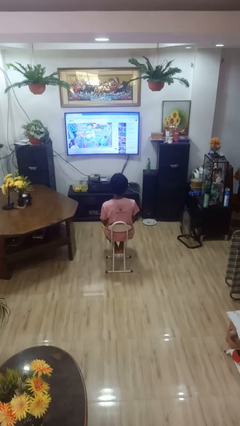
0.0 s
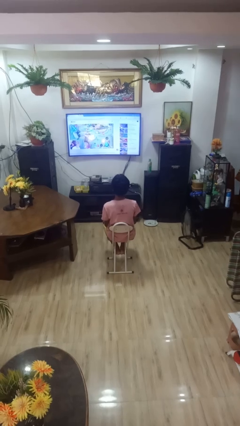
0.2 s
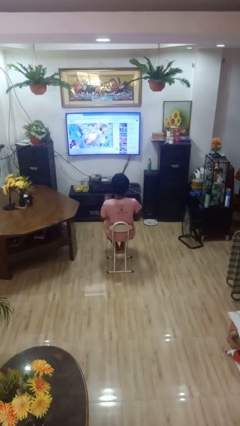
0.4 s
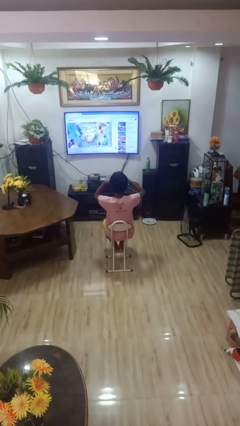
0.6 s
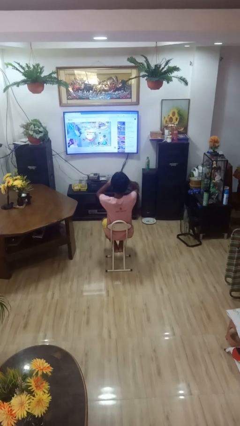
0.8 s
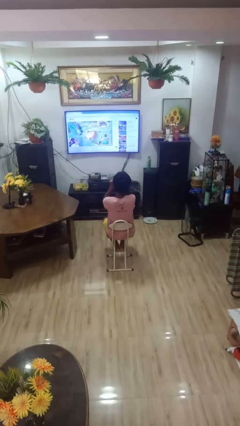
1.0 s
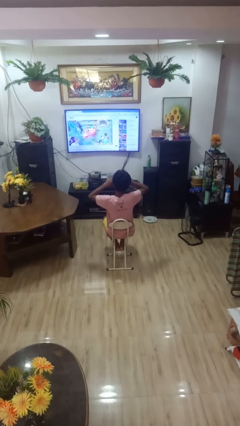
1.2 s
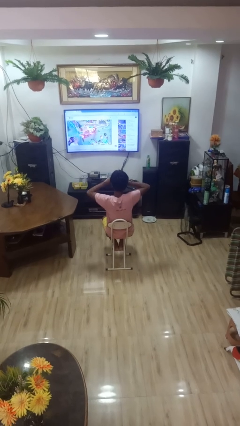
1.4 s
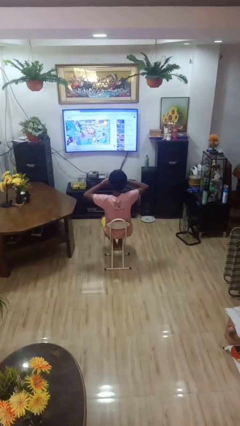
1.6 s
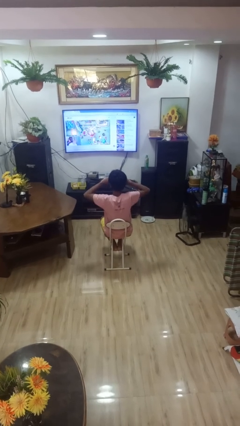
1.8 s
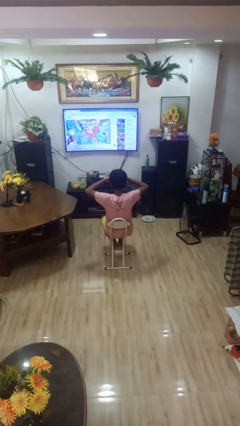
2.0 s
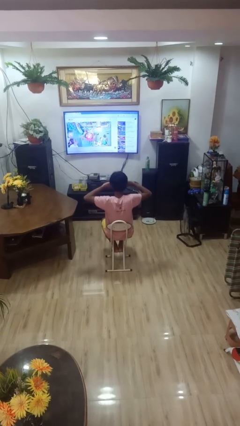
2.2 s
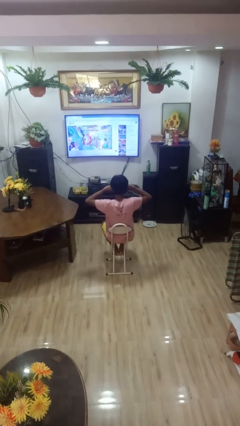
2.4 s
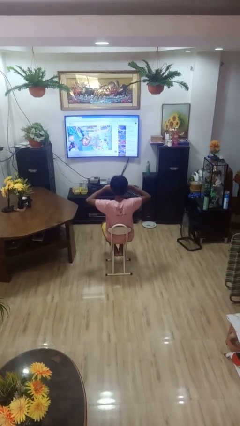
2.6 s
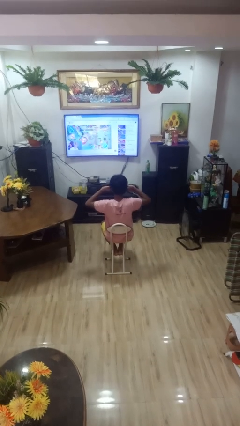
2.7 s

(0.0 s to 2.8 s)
person rubs eyes

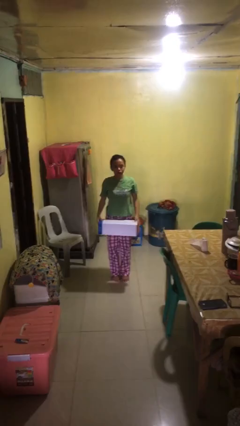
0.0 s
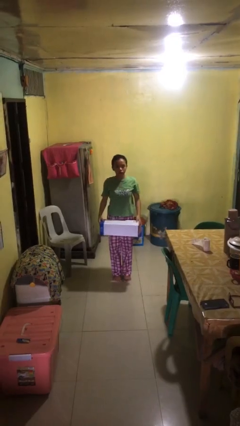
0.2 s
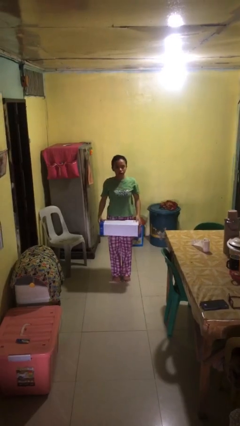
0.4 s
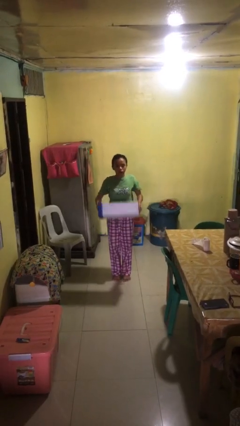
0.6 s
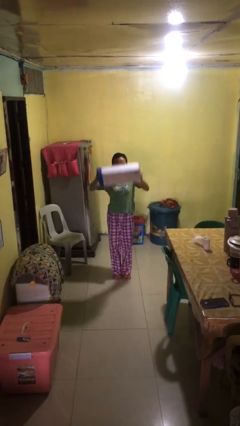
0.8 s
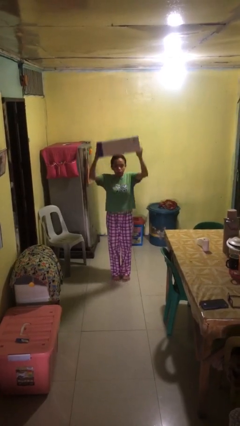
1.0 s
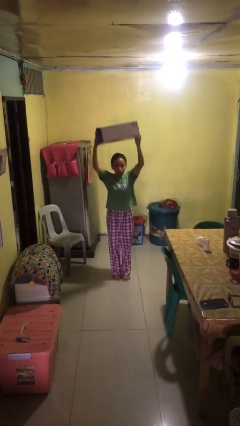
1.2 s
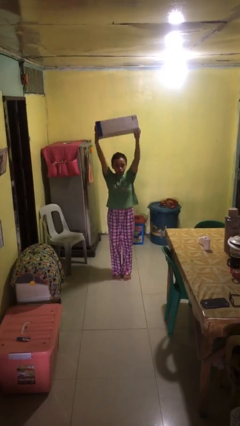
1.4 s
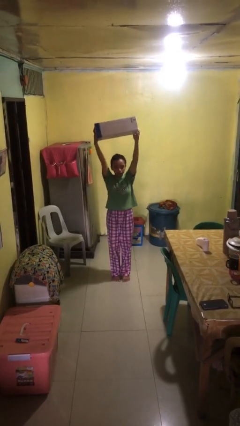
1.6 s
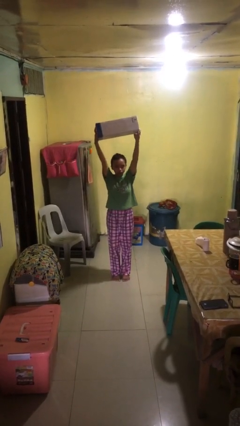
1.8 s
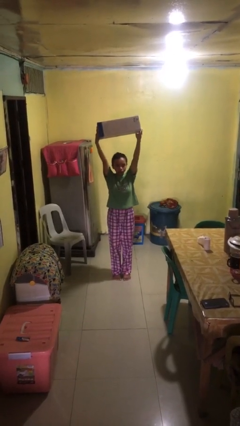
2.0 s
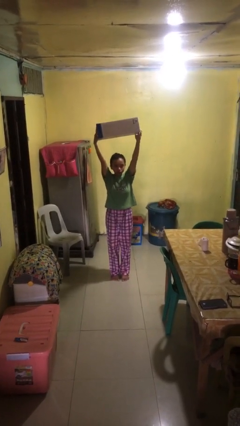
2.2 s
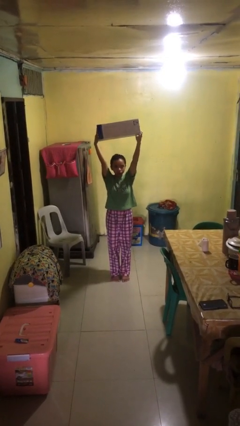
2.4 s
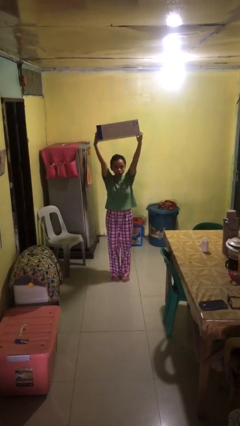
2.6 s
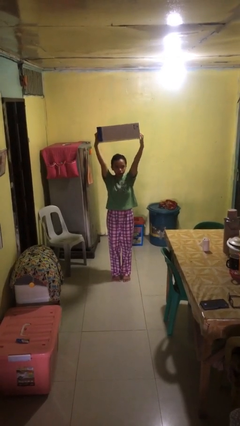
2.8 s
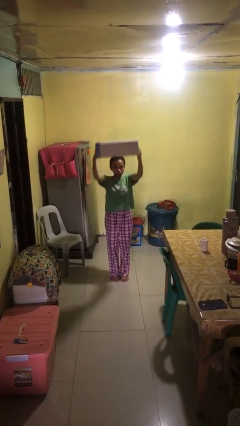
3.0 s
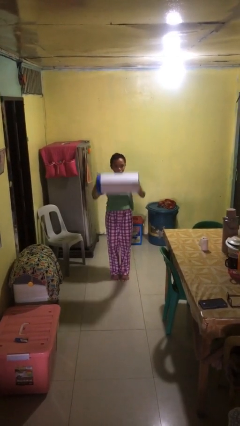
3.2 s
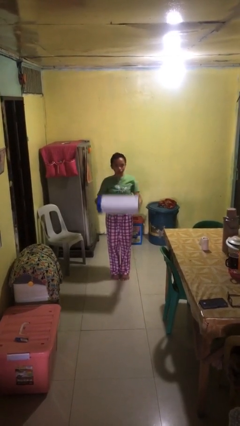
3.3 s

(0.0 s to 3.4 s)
person holds object above head

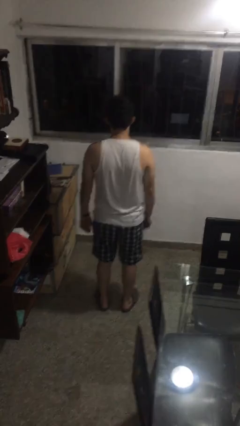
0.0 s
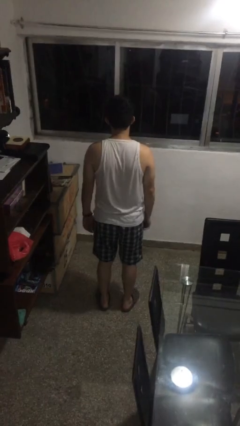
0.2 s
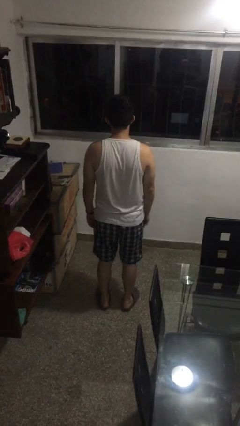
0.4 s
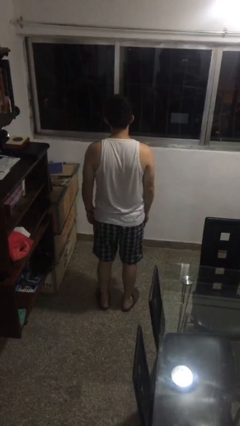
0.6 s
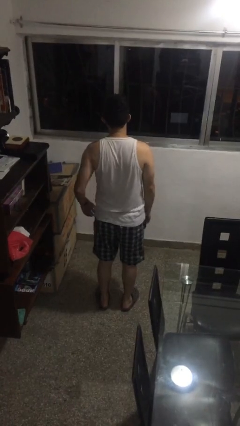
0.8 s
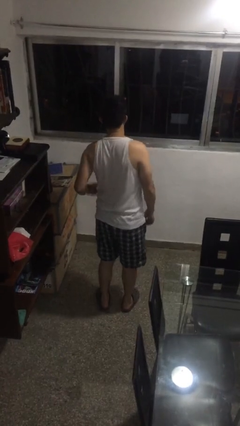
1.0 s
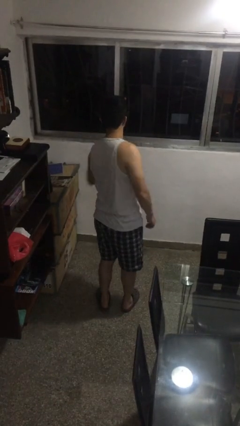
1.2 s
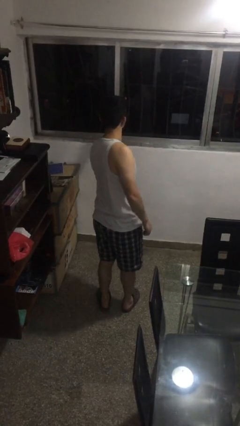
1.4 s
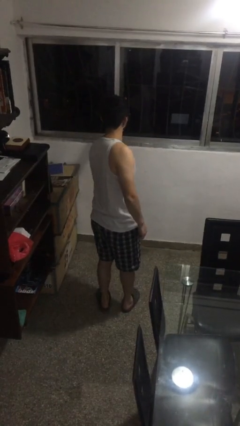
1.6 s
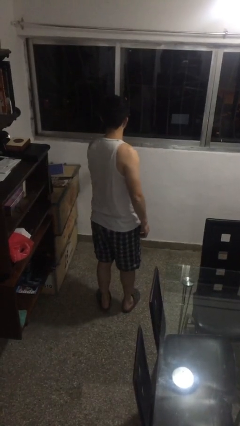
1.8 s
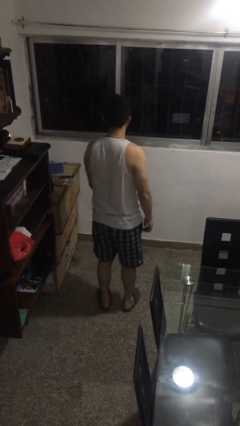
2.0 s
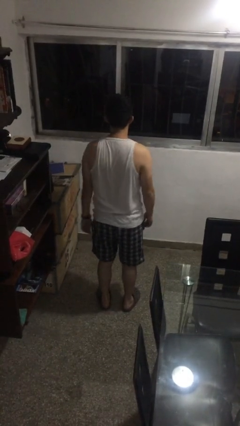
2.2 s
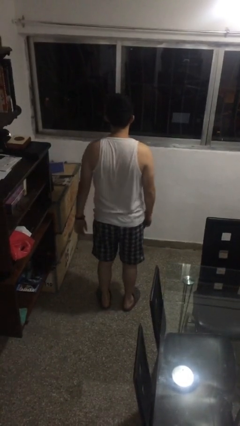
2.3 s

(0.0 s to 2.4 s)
person punches

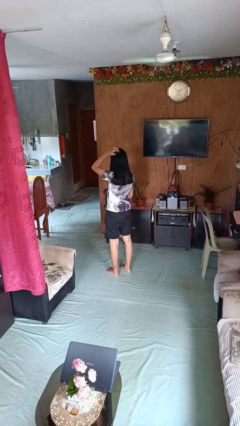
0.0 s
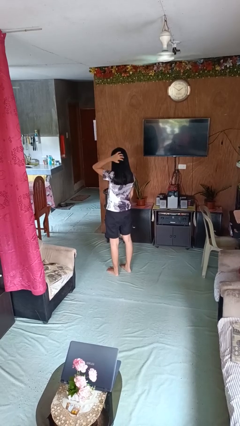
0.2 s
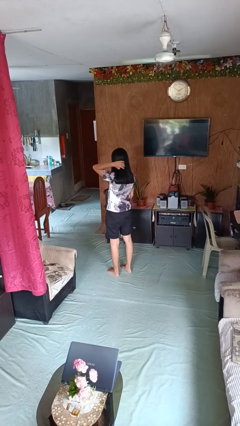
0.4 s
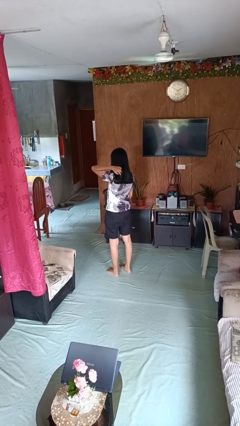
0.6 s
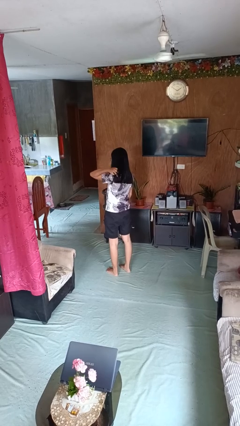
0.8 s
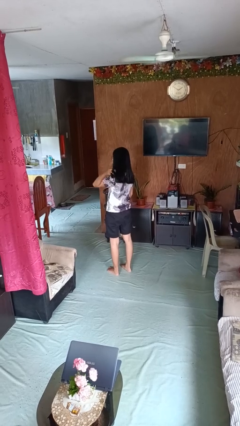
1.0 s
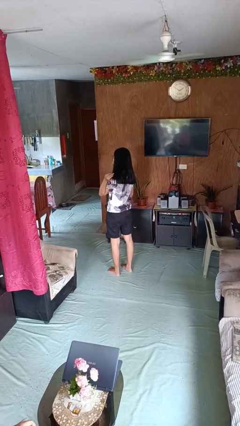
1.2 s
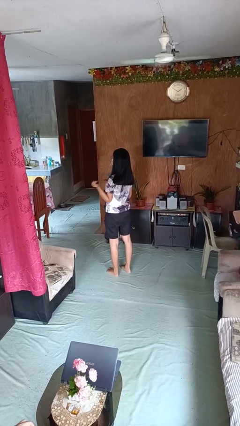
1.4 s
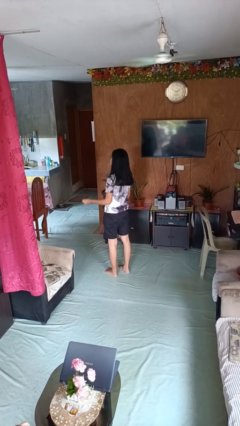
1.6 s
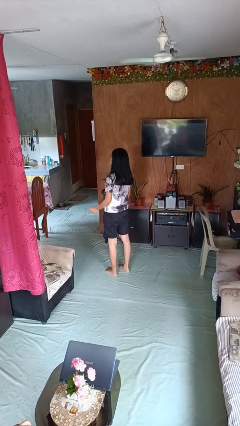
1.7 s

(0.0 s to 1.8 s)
person strokes hair

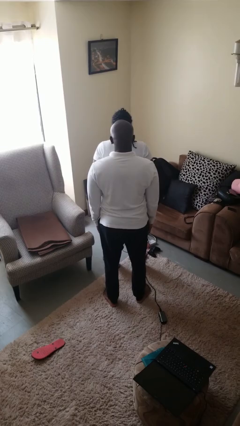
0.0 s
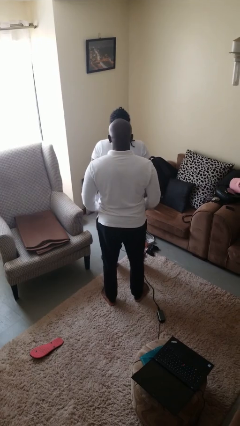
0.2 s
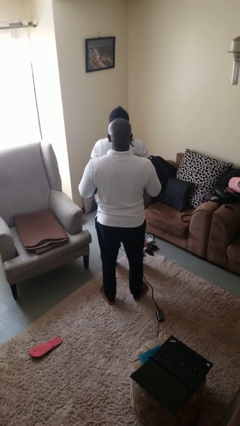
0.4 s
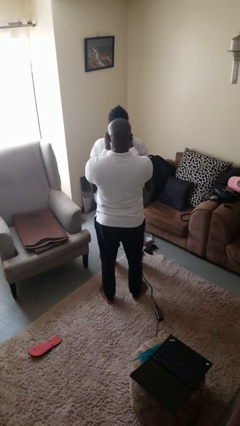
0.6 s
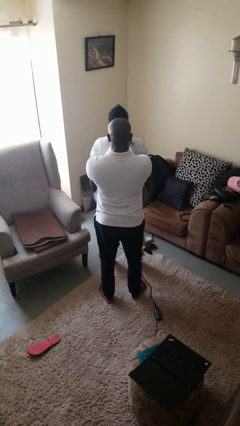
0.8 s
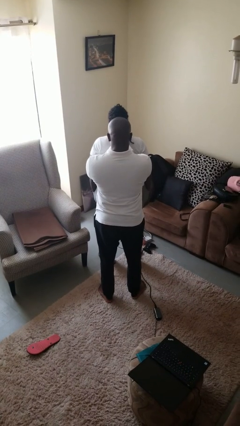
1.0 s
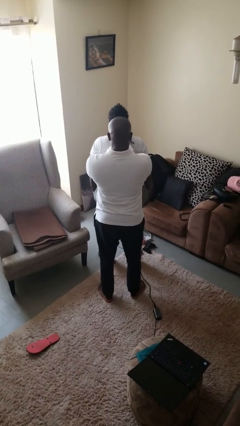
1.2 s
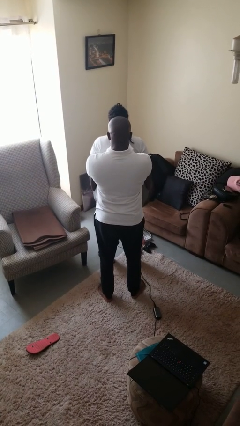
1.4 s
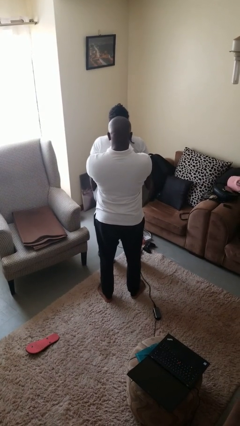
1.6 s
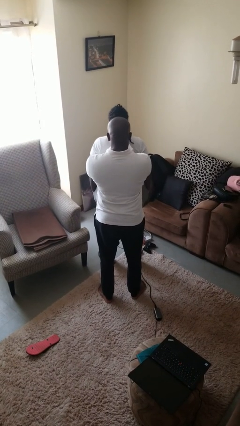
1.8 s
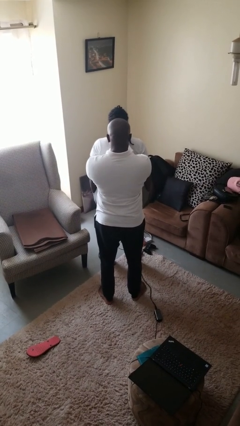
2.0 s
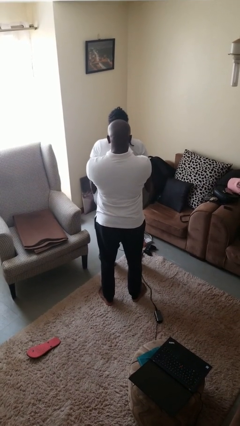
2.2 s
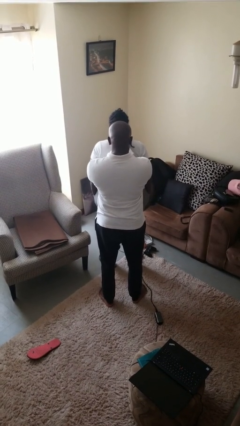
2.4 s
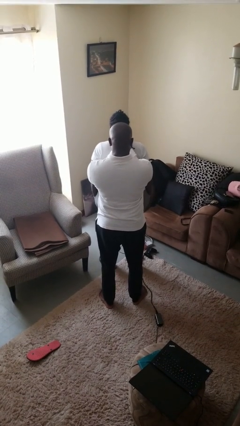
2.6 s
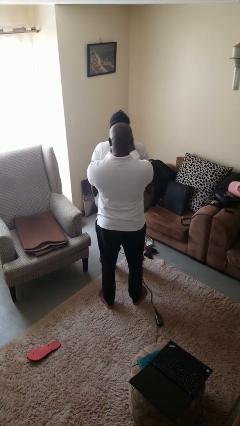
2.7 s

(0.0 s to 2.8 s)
person grabs person by hair

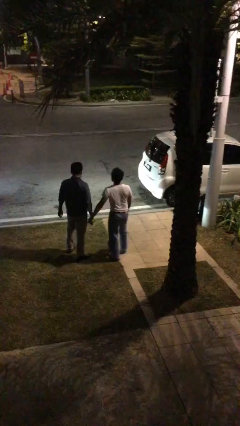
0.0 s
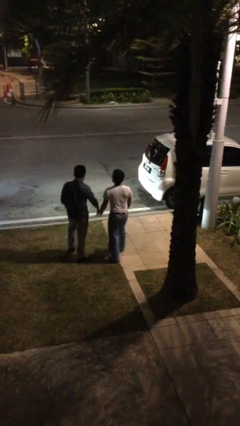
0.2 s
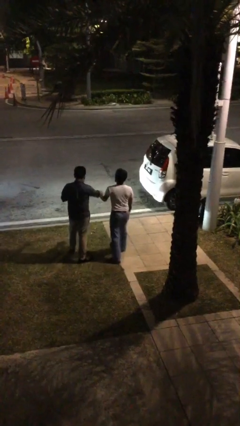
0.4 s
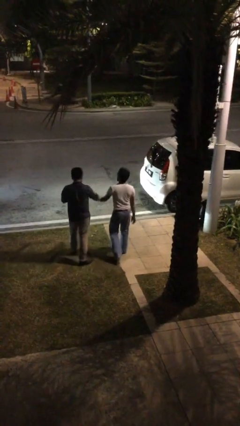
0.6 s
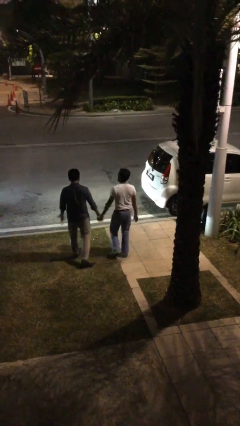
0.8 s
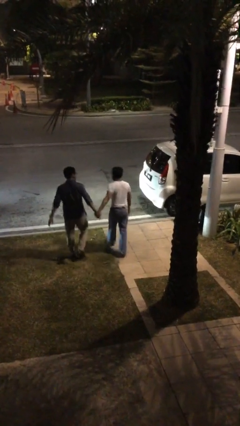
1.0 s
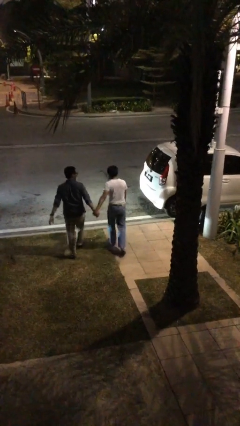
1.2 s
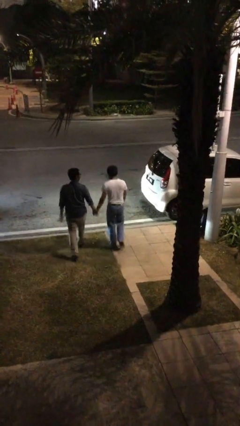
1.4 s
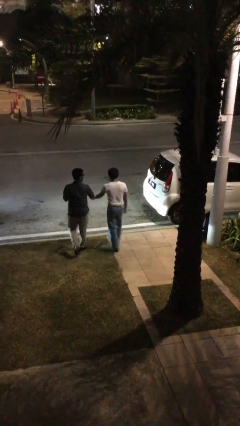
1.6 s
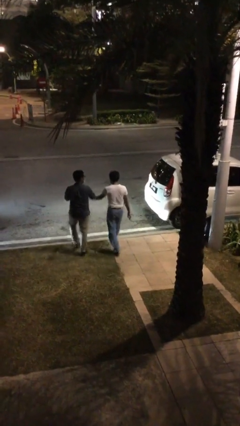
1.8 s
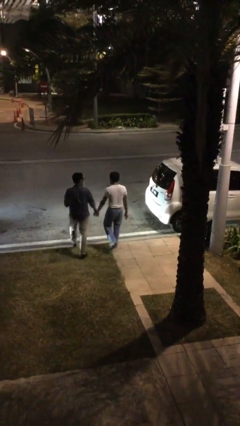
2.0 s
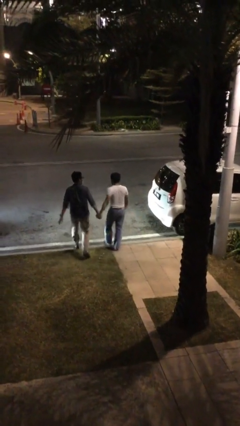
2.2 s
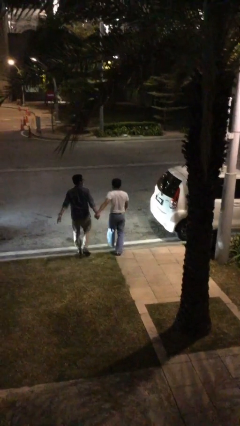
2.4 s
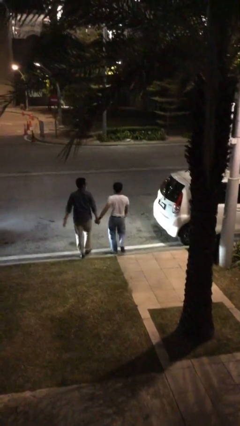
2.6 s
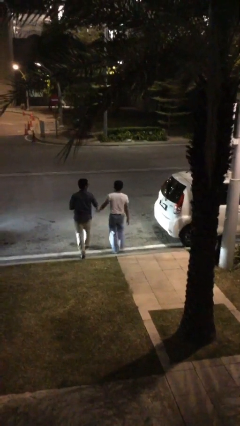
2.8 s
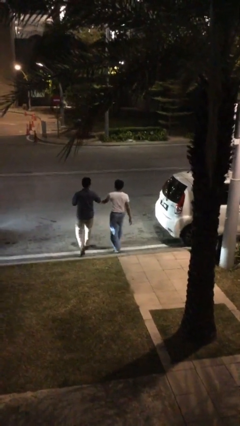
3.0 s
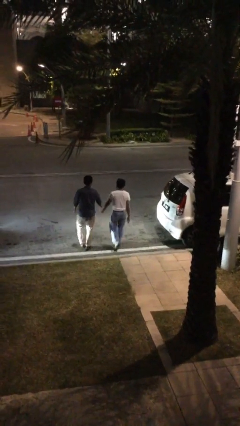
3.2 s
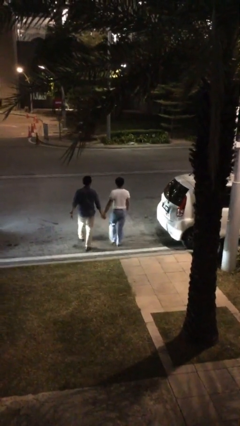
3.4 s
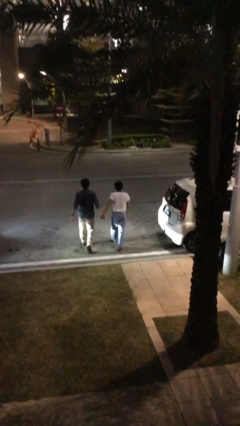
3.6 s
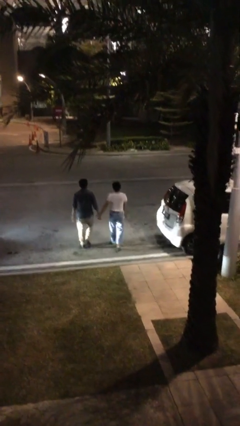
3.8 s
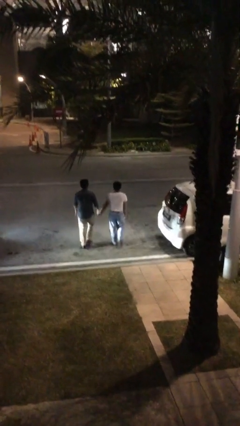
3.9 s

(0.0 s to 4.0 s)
person holds hand
